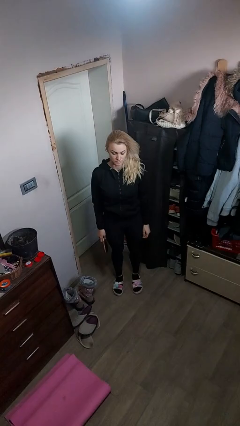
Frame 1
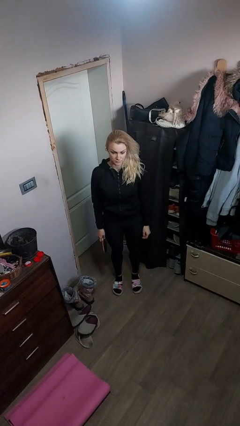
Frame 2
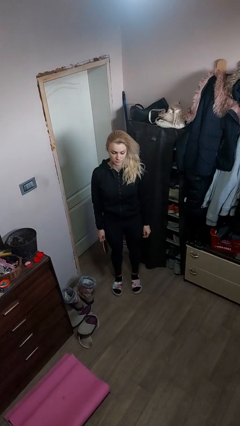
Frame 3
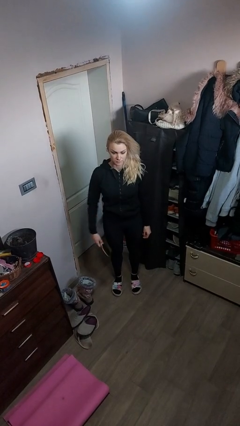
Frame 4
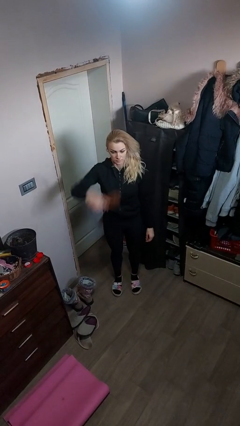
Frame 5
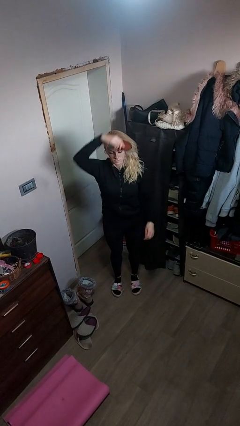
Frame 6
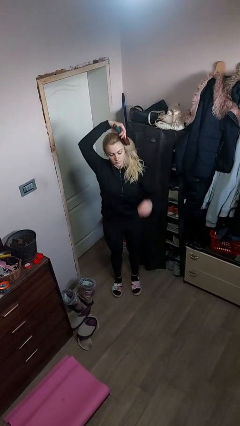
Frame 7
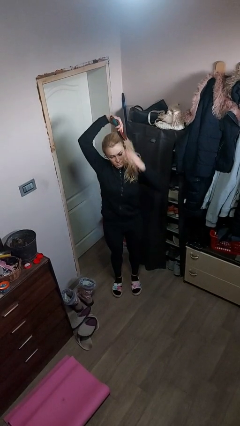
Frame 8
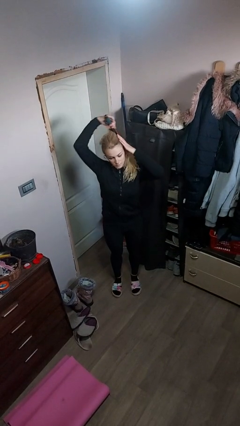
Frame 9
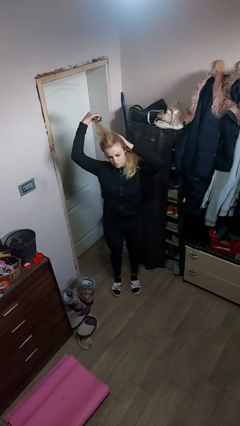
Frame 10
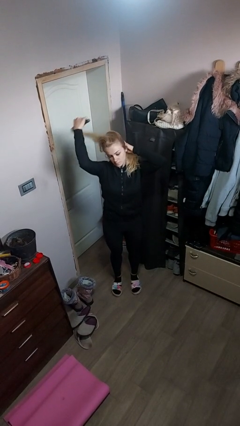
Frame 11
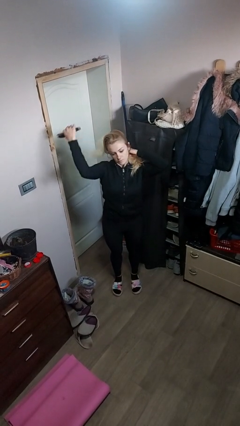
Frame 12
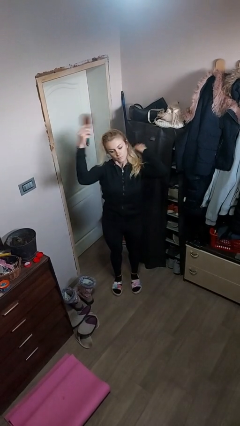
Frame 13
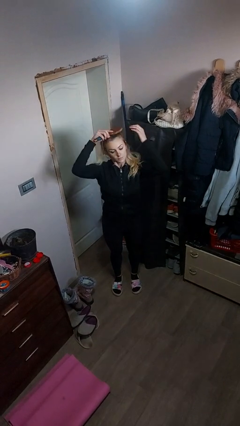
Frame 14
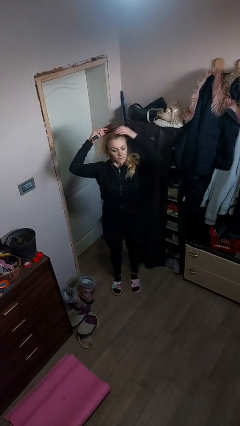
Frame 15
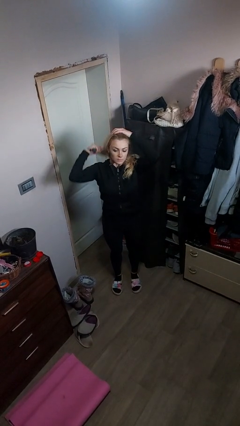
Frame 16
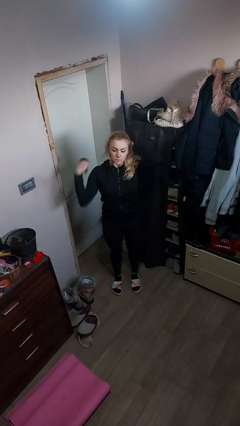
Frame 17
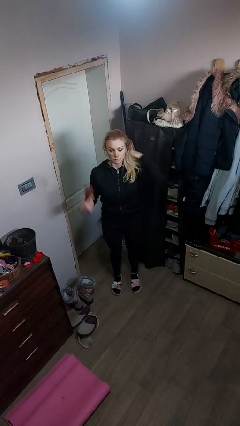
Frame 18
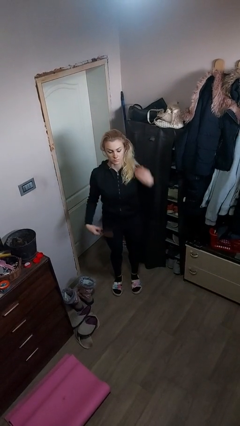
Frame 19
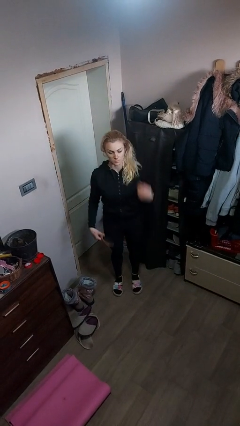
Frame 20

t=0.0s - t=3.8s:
person brushes hair

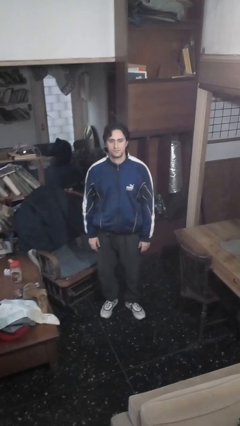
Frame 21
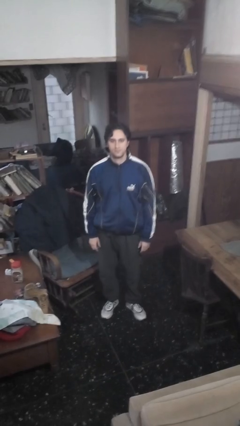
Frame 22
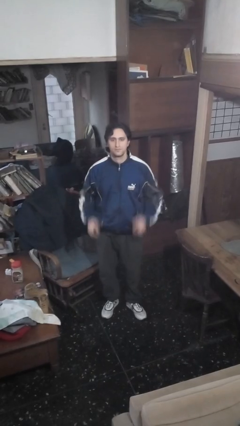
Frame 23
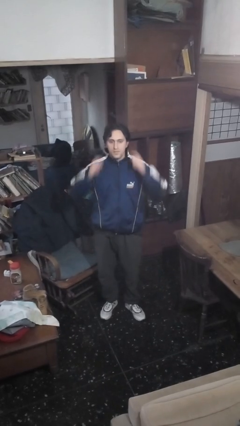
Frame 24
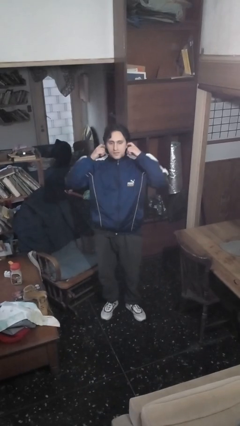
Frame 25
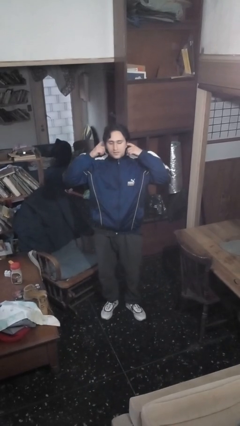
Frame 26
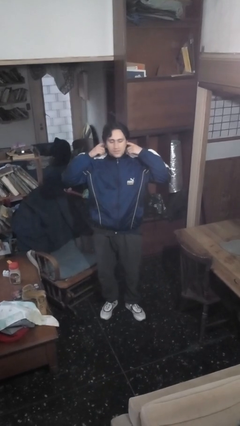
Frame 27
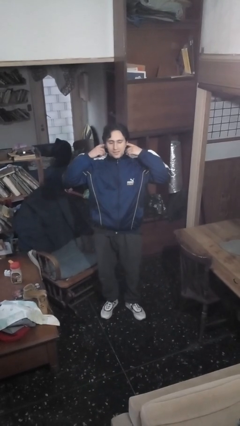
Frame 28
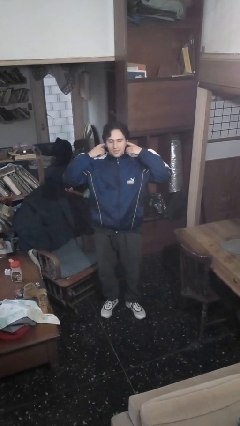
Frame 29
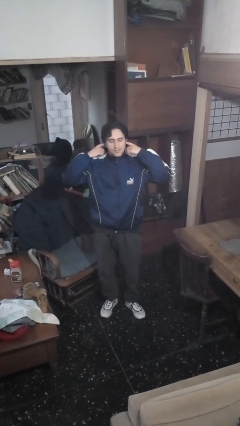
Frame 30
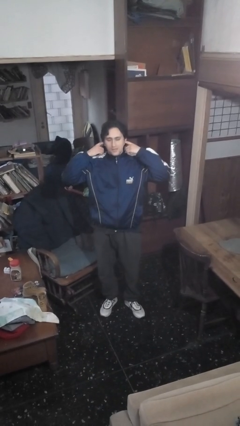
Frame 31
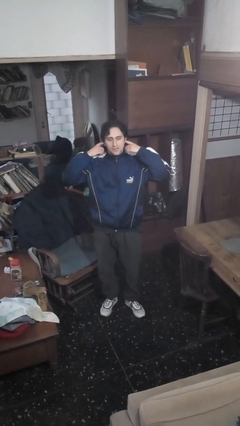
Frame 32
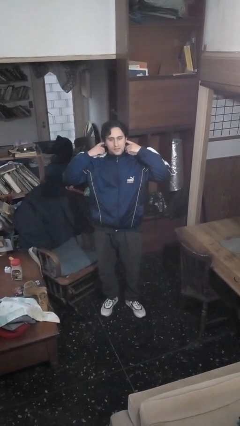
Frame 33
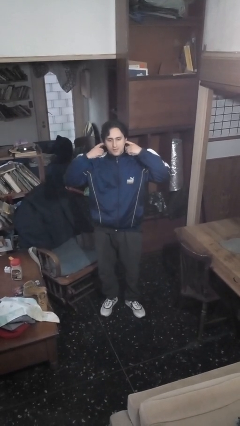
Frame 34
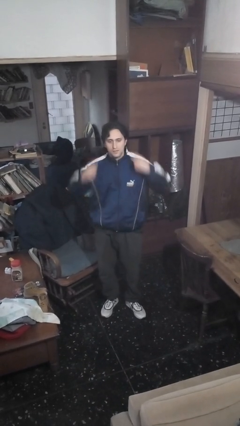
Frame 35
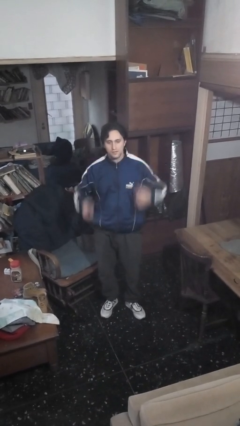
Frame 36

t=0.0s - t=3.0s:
person puts fingers in ear

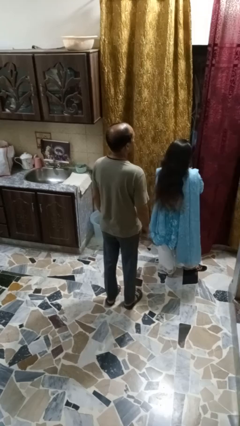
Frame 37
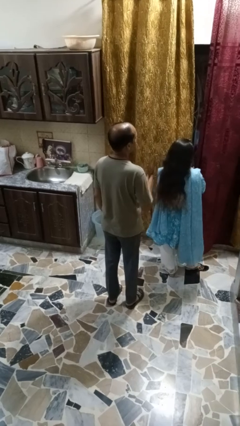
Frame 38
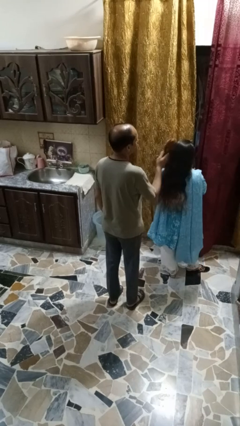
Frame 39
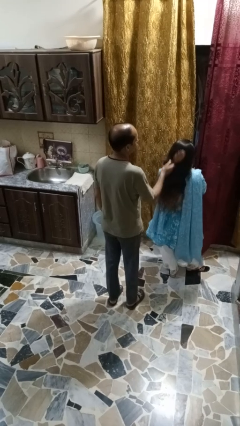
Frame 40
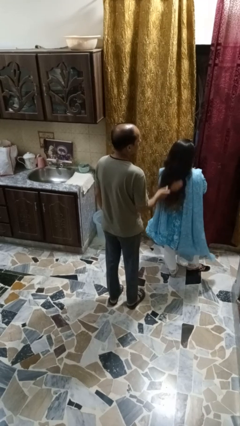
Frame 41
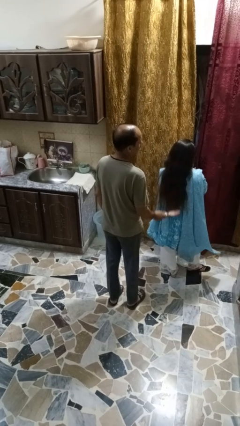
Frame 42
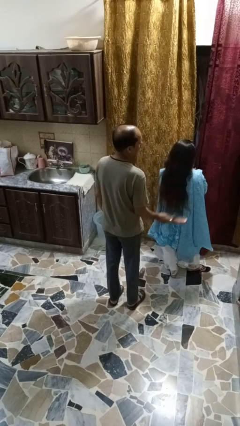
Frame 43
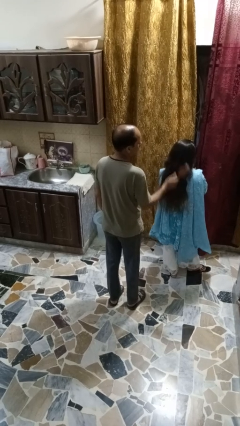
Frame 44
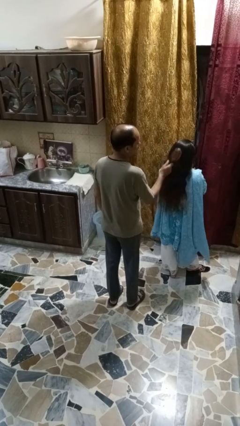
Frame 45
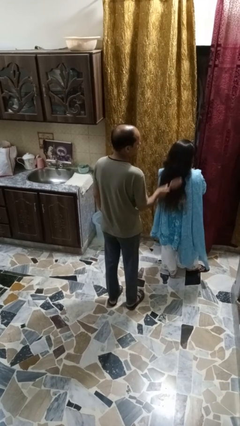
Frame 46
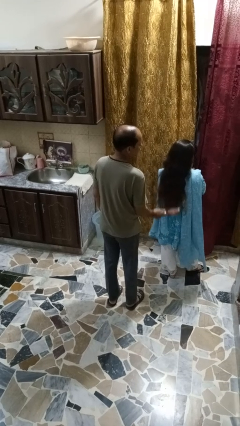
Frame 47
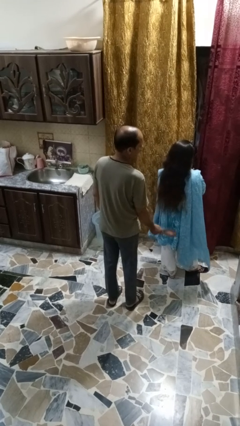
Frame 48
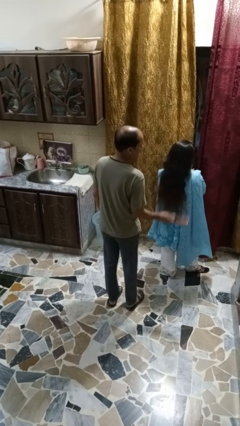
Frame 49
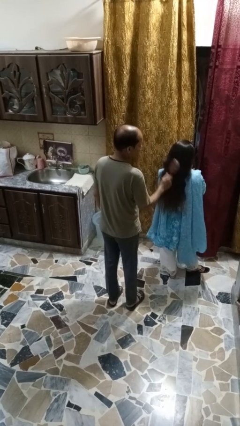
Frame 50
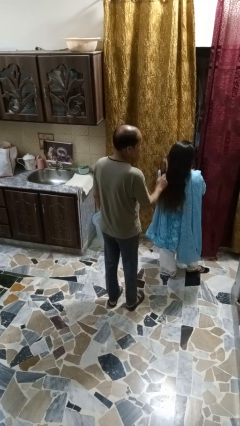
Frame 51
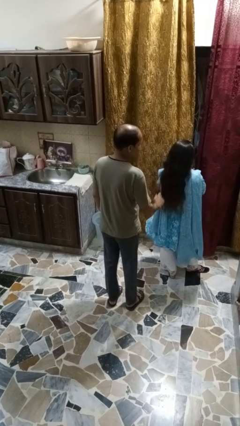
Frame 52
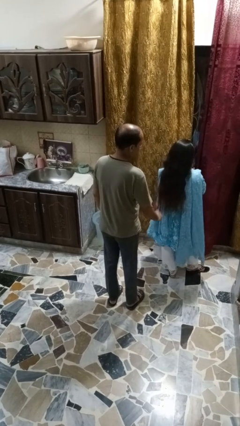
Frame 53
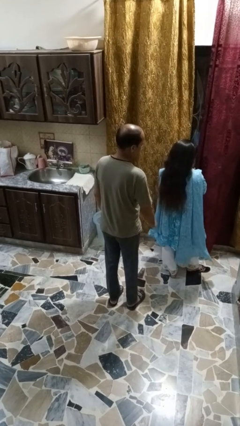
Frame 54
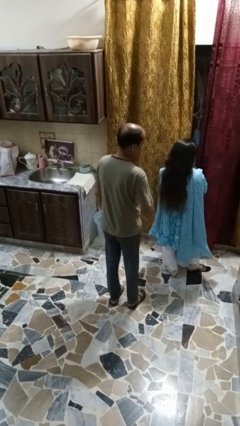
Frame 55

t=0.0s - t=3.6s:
person brushes hair of person

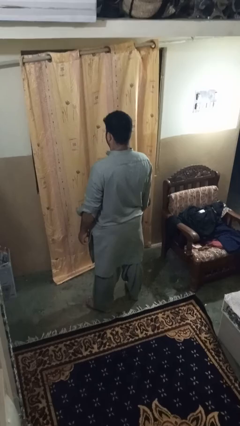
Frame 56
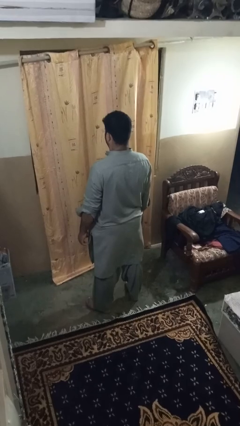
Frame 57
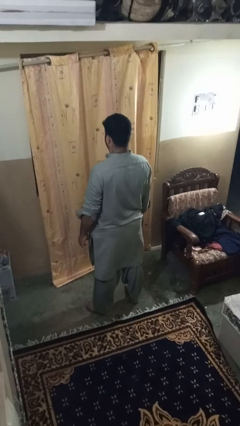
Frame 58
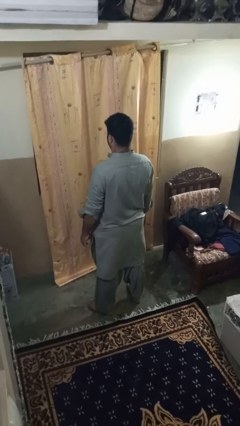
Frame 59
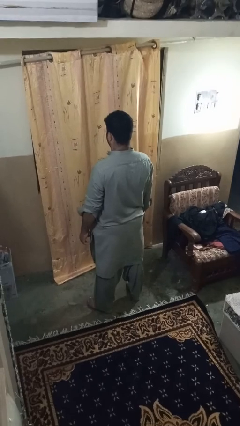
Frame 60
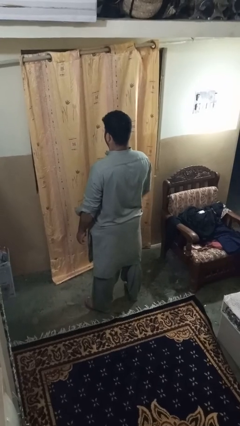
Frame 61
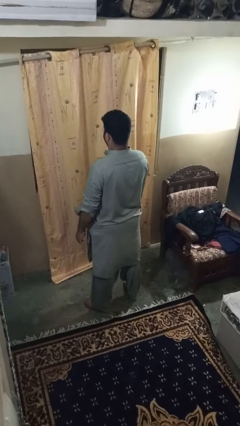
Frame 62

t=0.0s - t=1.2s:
person opens curtains

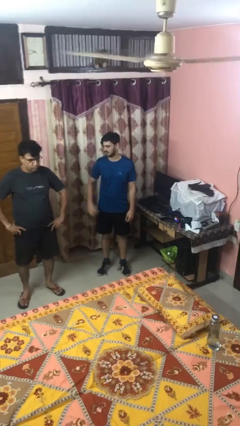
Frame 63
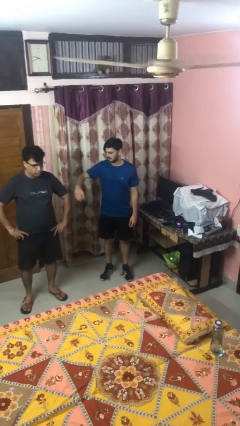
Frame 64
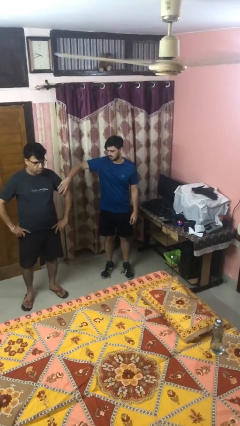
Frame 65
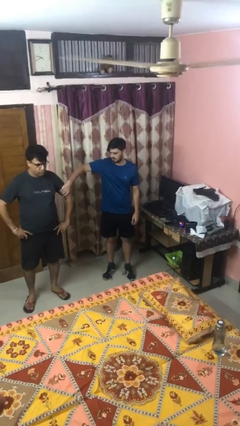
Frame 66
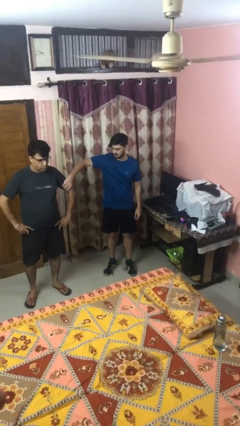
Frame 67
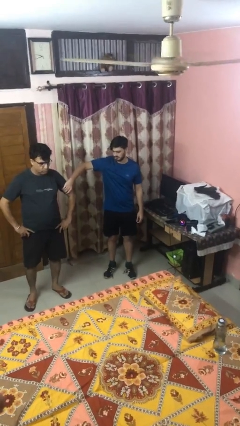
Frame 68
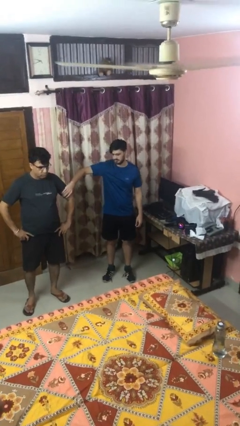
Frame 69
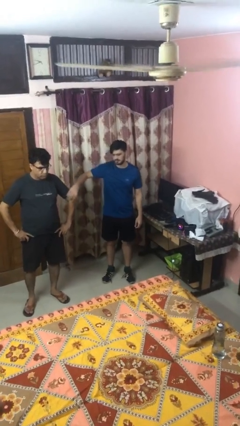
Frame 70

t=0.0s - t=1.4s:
person grabs person by bicep

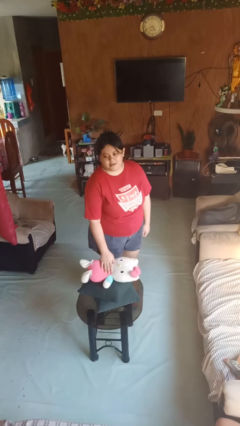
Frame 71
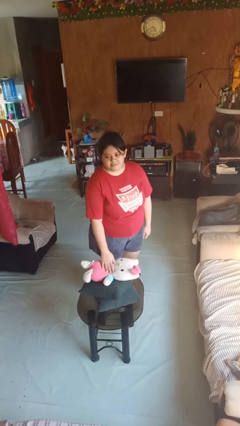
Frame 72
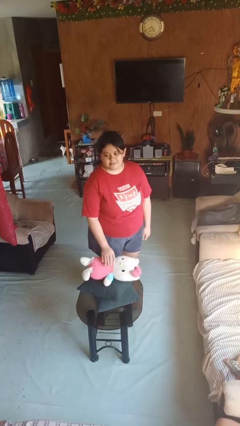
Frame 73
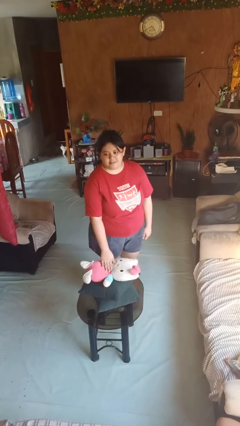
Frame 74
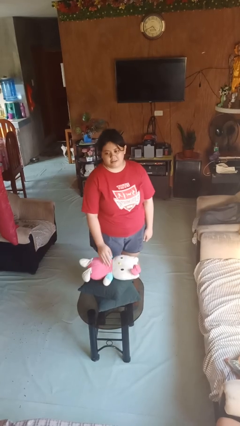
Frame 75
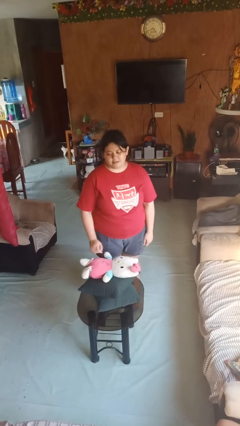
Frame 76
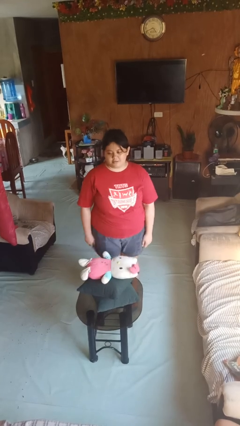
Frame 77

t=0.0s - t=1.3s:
person taps object with finger

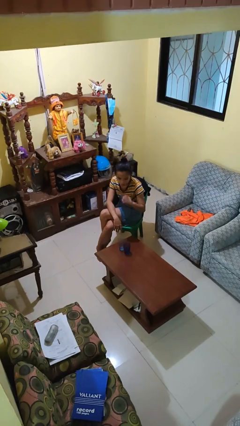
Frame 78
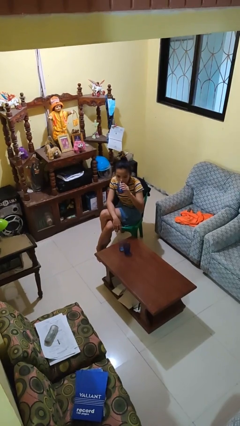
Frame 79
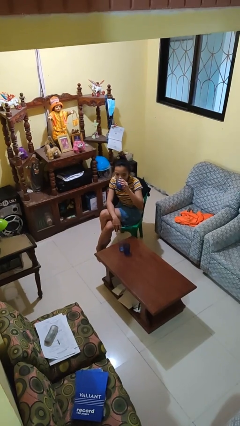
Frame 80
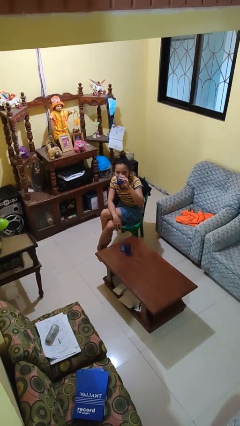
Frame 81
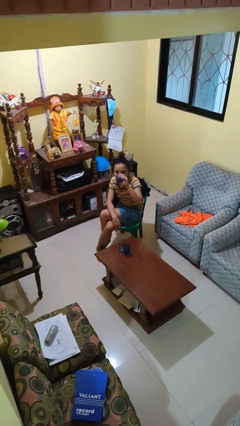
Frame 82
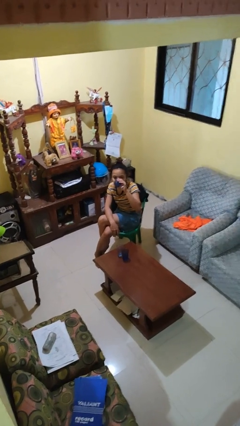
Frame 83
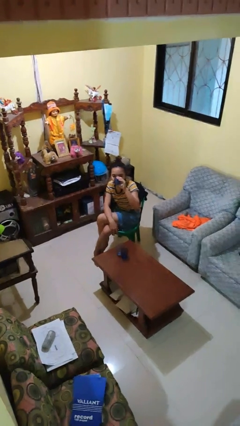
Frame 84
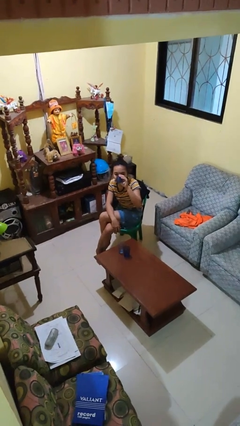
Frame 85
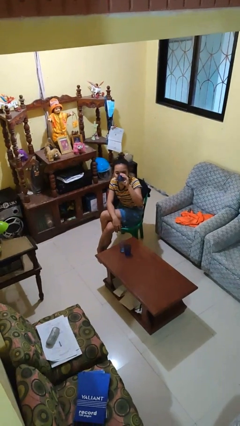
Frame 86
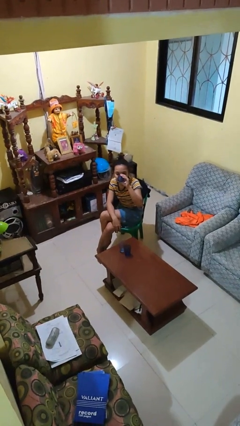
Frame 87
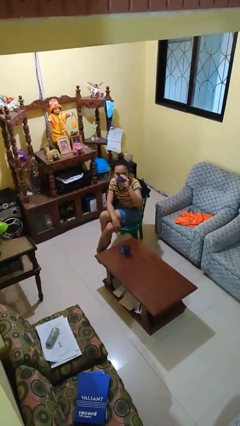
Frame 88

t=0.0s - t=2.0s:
person drinks from shotglass

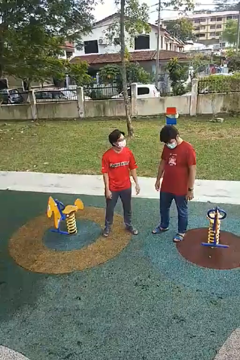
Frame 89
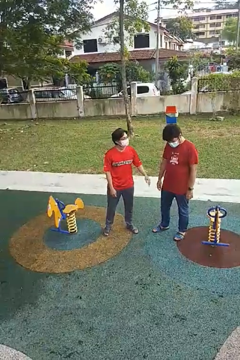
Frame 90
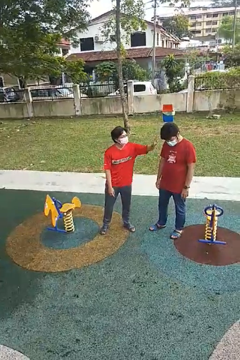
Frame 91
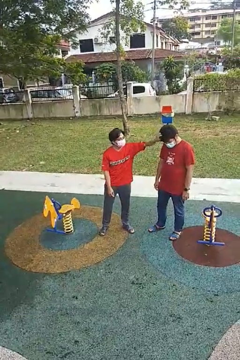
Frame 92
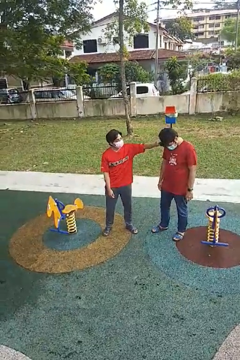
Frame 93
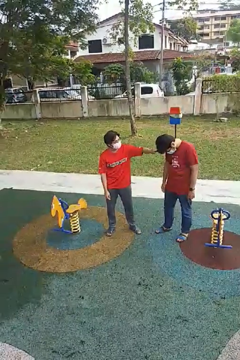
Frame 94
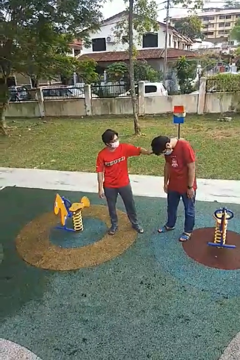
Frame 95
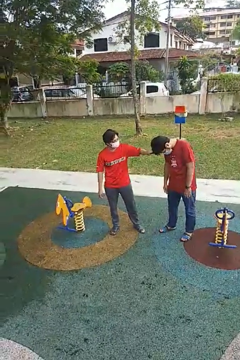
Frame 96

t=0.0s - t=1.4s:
person grabs person by hair
